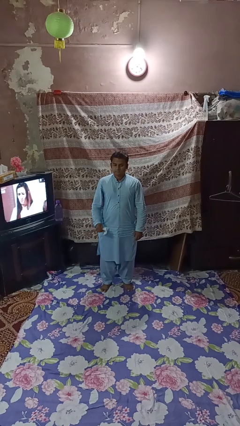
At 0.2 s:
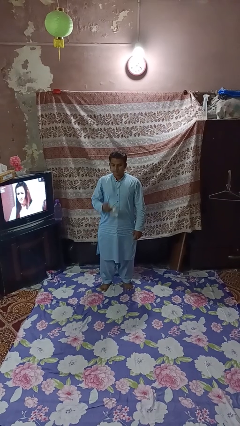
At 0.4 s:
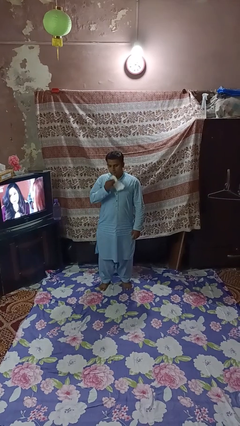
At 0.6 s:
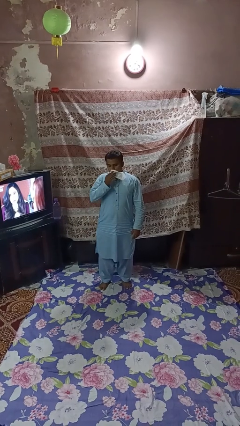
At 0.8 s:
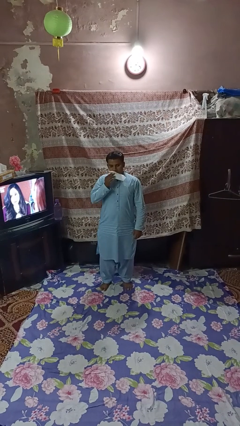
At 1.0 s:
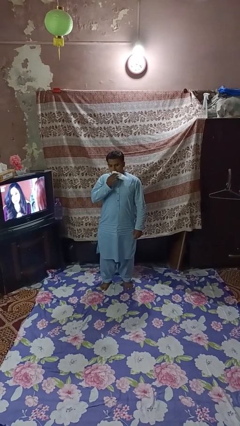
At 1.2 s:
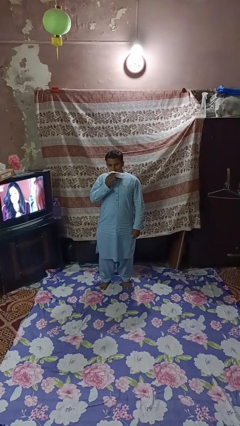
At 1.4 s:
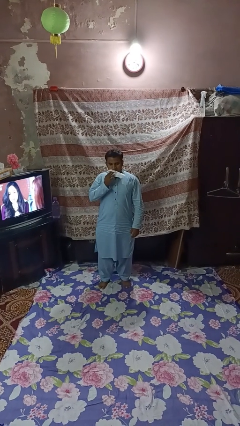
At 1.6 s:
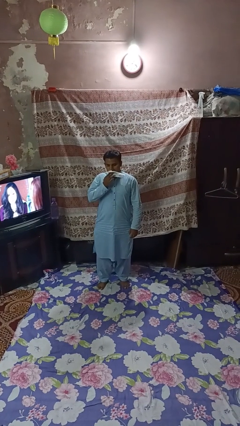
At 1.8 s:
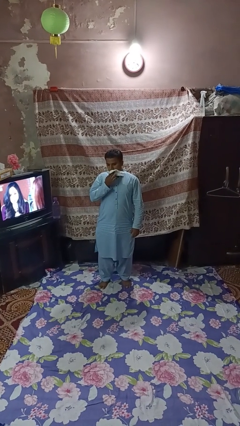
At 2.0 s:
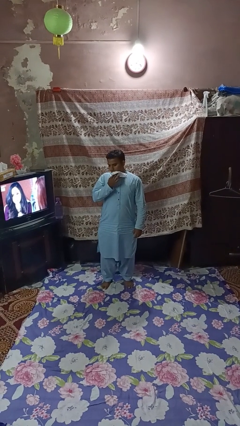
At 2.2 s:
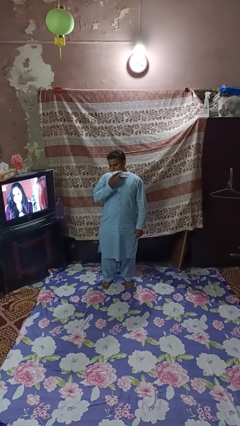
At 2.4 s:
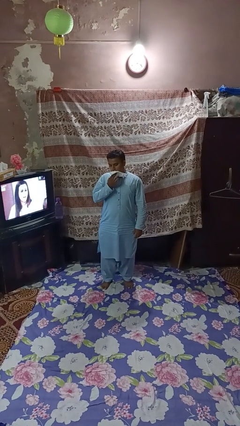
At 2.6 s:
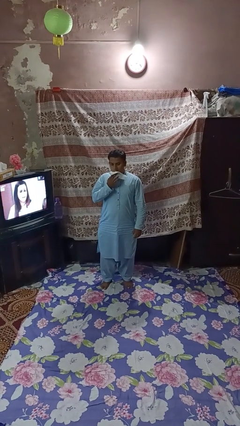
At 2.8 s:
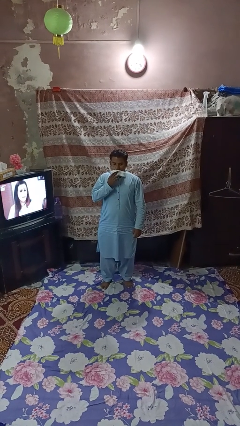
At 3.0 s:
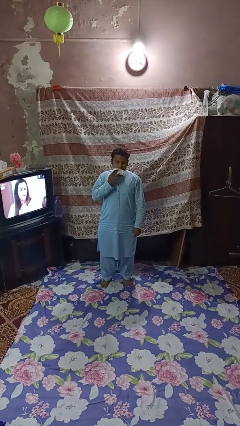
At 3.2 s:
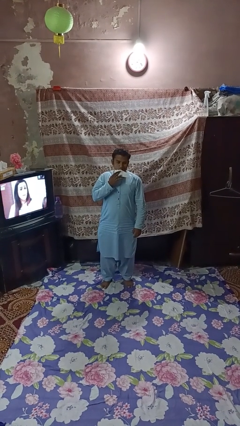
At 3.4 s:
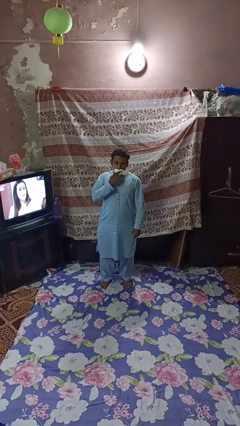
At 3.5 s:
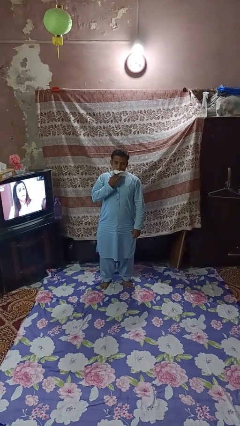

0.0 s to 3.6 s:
person wipes mouth with napkin

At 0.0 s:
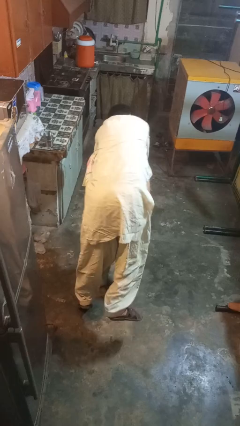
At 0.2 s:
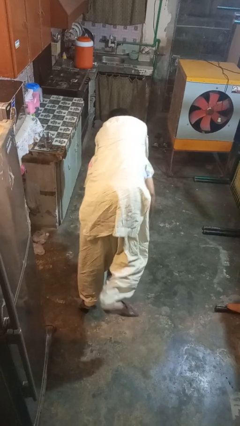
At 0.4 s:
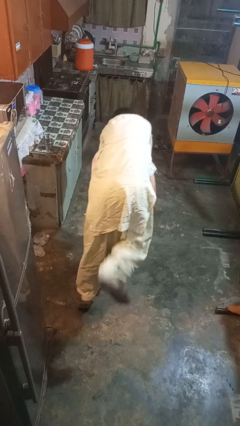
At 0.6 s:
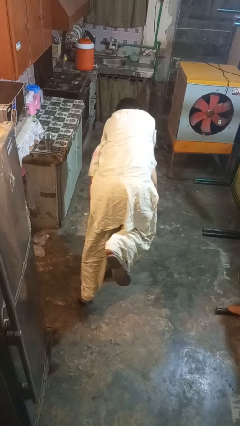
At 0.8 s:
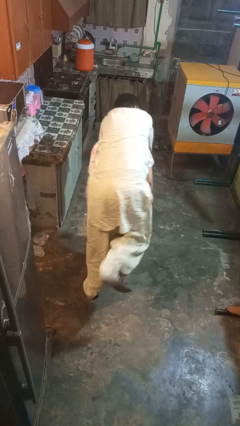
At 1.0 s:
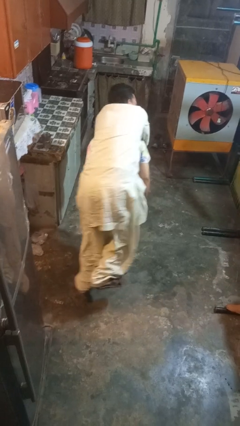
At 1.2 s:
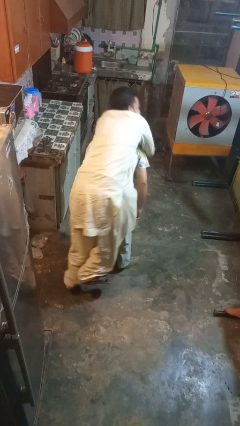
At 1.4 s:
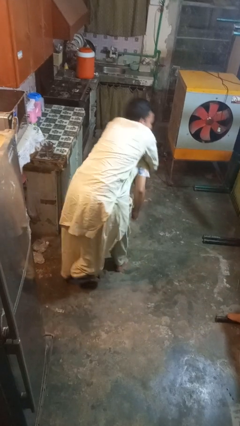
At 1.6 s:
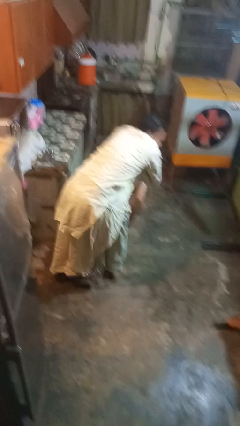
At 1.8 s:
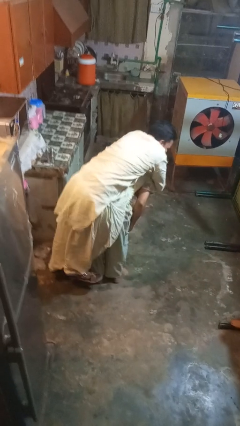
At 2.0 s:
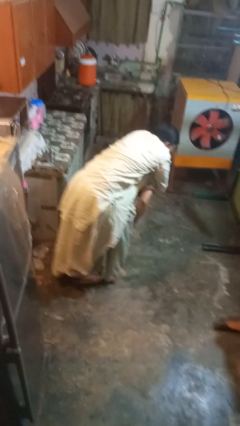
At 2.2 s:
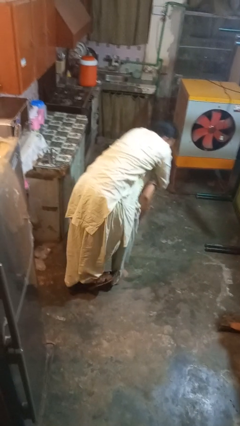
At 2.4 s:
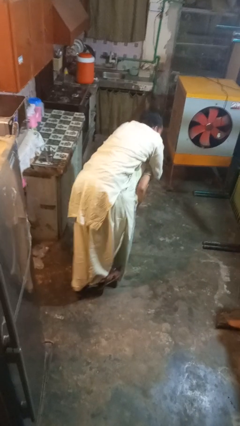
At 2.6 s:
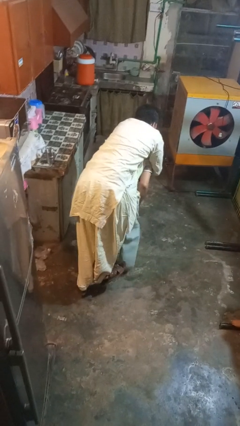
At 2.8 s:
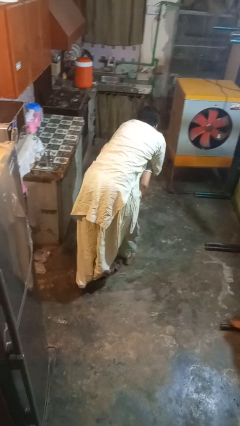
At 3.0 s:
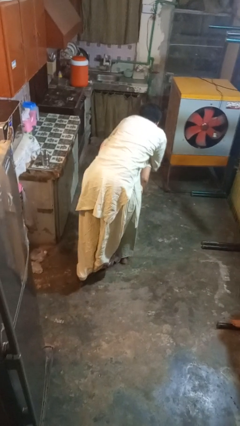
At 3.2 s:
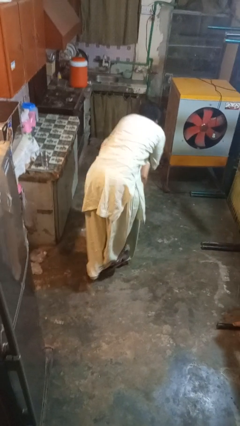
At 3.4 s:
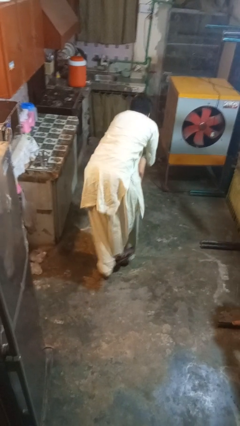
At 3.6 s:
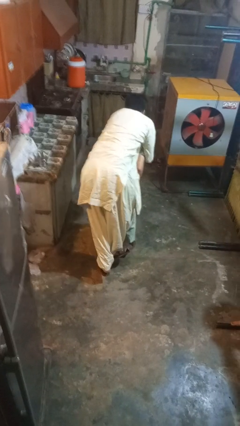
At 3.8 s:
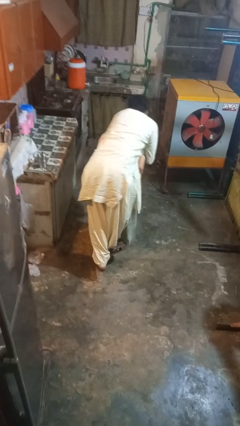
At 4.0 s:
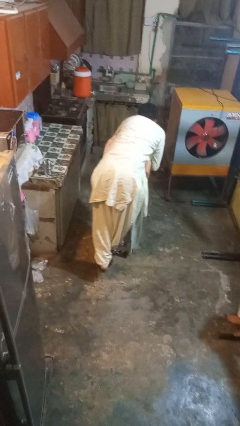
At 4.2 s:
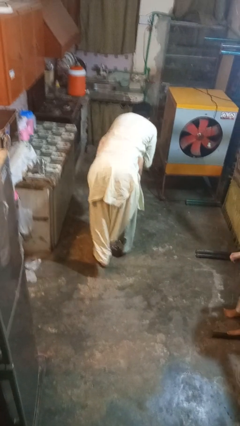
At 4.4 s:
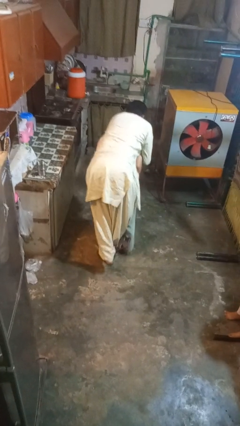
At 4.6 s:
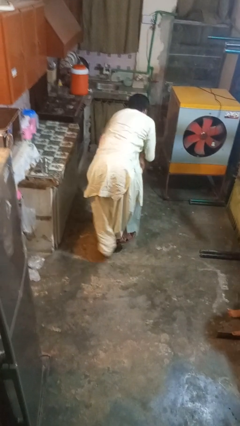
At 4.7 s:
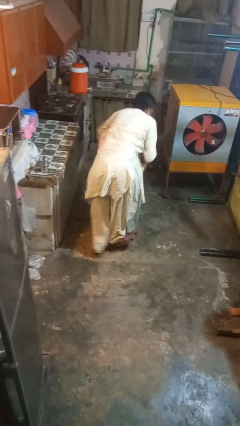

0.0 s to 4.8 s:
person carries person on back

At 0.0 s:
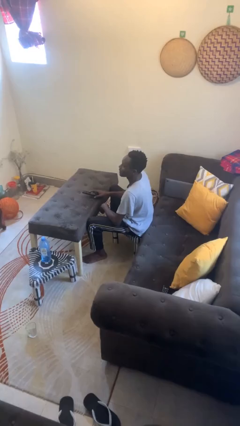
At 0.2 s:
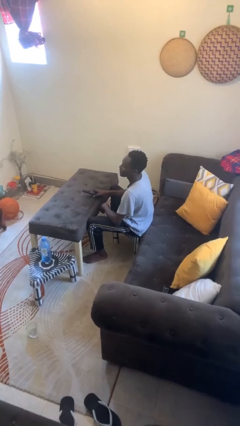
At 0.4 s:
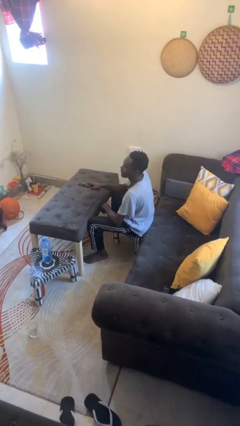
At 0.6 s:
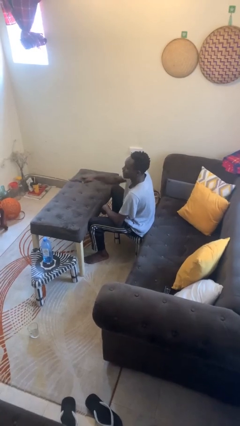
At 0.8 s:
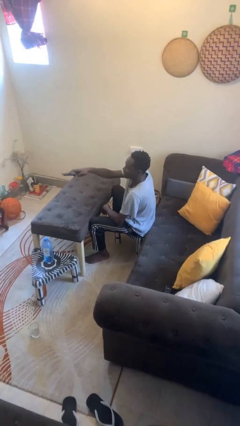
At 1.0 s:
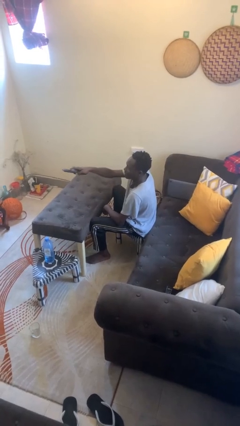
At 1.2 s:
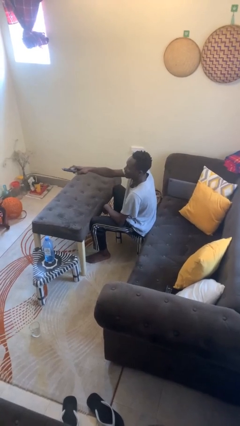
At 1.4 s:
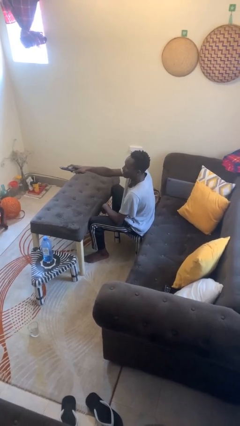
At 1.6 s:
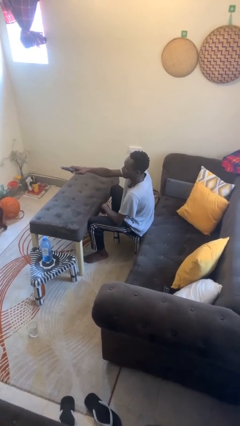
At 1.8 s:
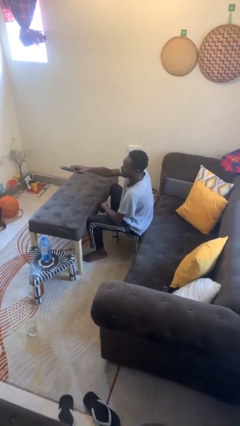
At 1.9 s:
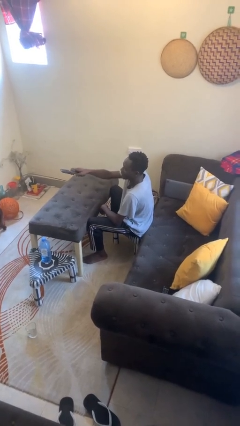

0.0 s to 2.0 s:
person uses television remote

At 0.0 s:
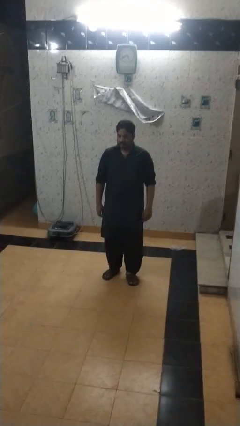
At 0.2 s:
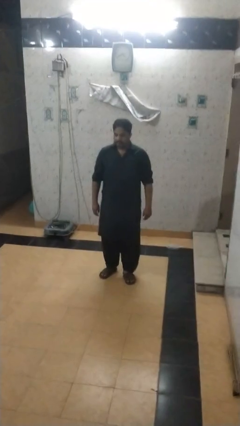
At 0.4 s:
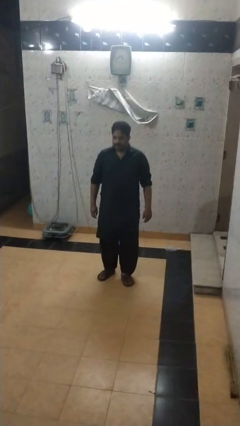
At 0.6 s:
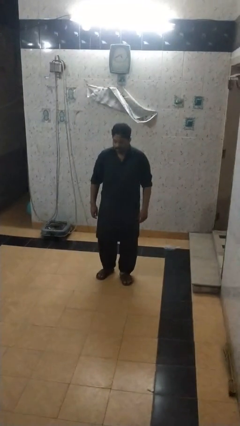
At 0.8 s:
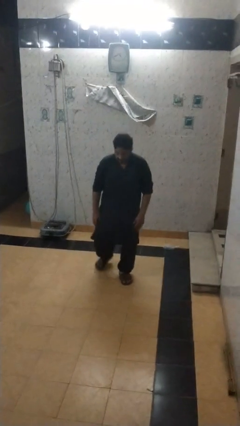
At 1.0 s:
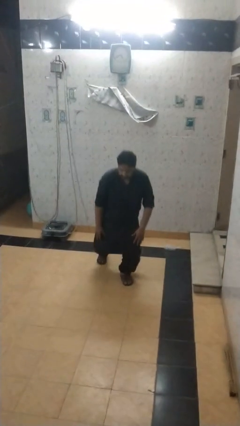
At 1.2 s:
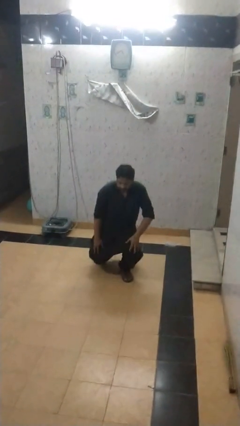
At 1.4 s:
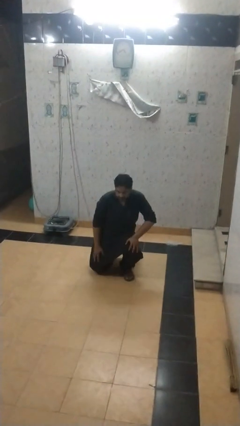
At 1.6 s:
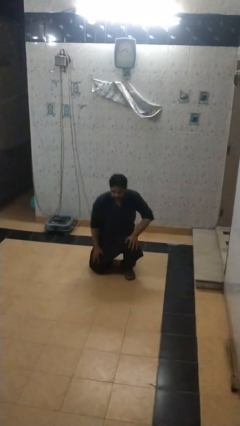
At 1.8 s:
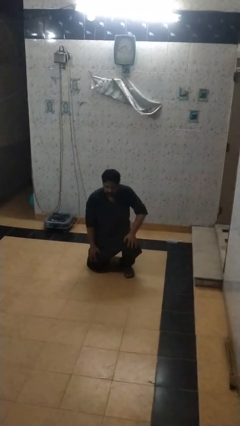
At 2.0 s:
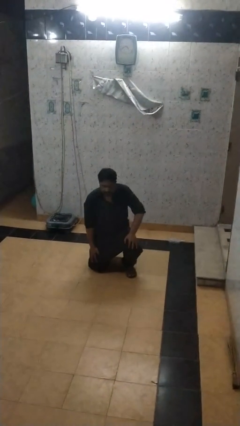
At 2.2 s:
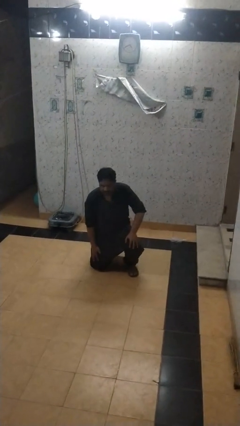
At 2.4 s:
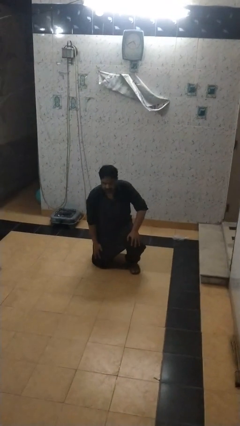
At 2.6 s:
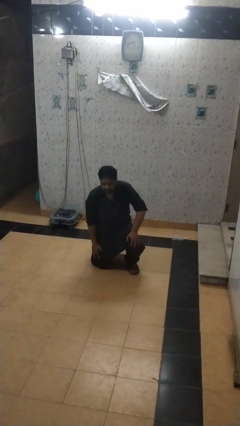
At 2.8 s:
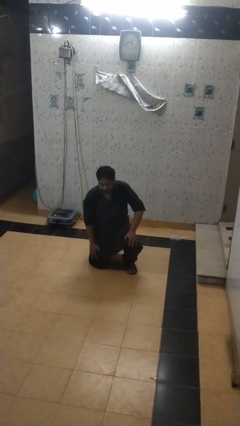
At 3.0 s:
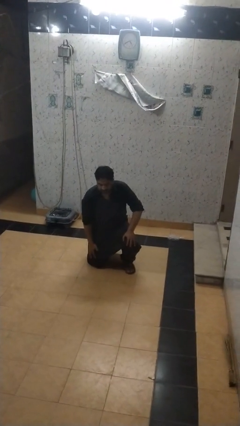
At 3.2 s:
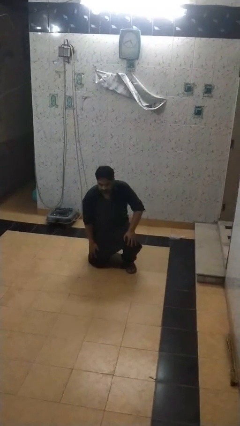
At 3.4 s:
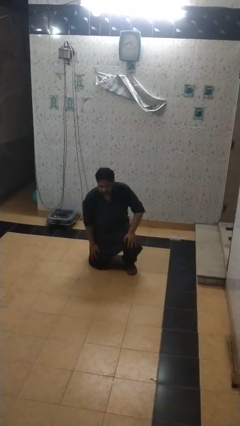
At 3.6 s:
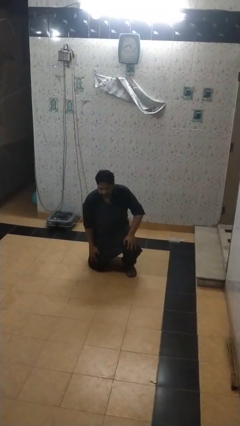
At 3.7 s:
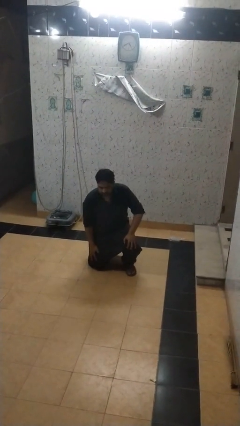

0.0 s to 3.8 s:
person kneels

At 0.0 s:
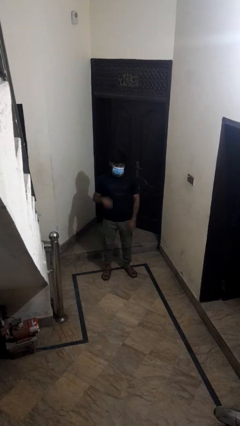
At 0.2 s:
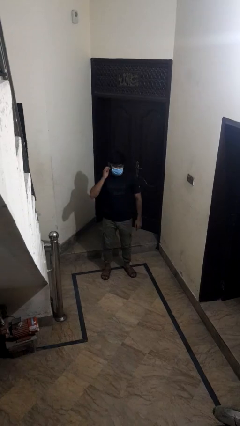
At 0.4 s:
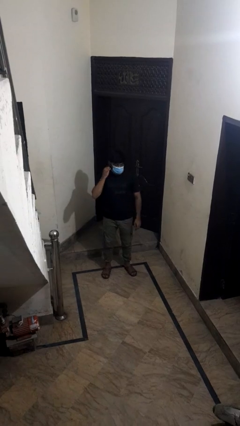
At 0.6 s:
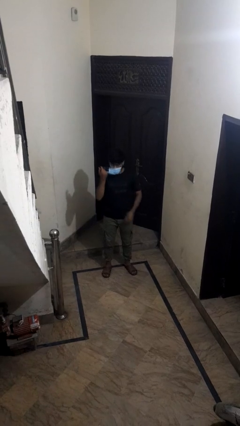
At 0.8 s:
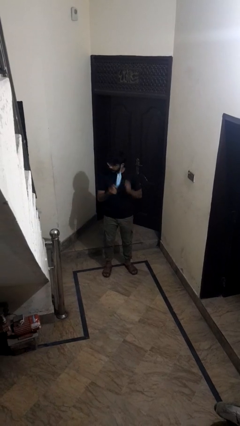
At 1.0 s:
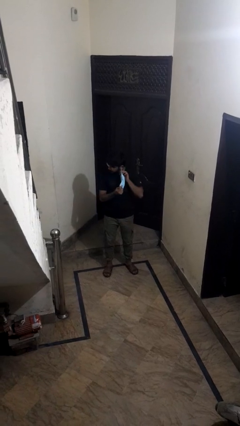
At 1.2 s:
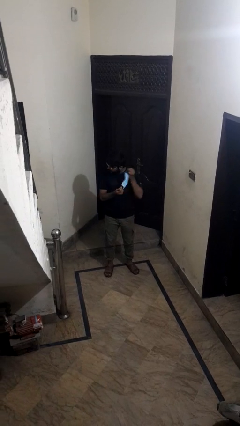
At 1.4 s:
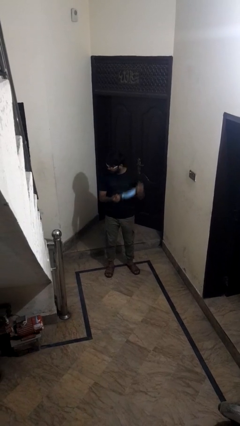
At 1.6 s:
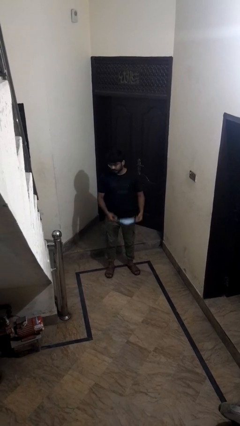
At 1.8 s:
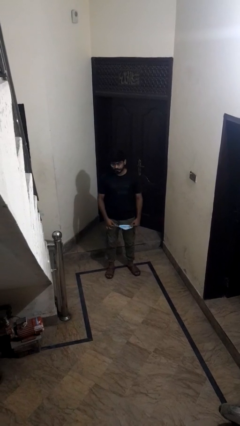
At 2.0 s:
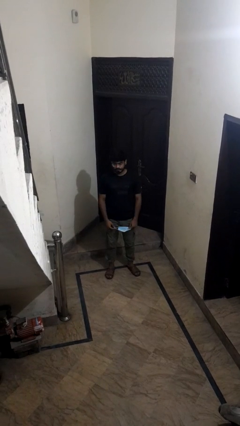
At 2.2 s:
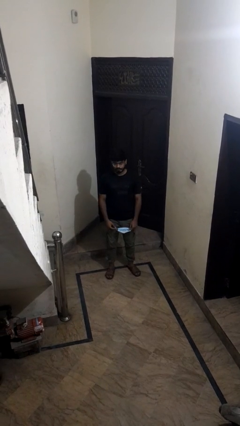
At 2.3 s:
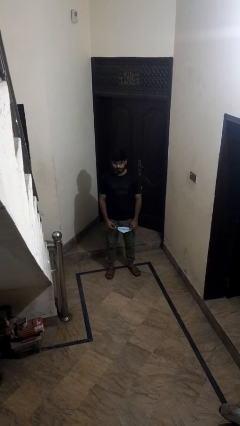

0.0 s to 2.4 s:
person takes off facemask

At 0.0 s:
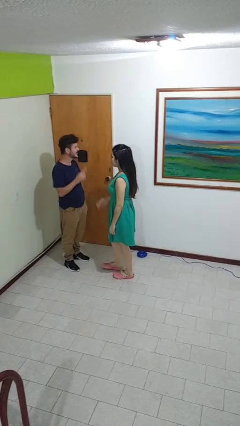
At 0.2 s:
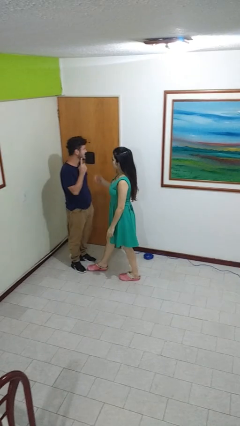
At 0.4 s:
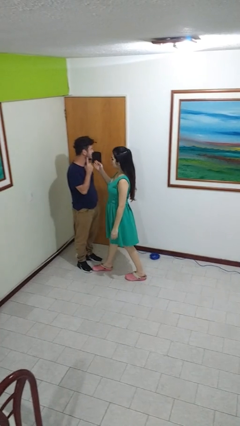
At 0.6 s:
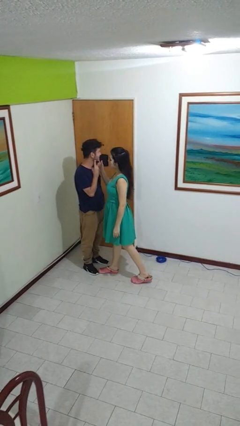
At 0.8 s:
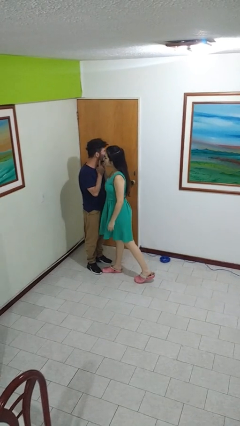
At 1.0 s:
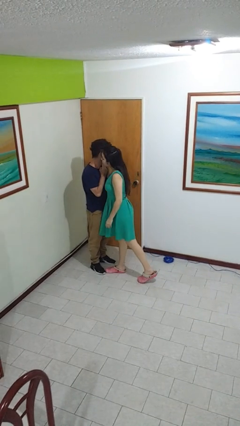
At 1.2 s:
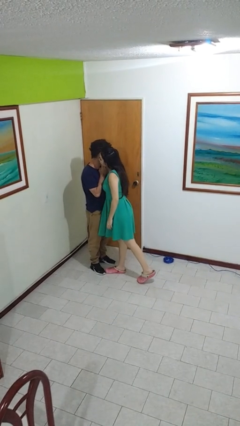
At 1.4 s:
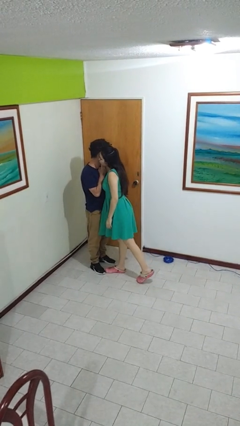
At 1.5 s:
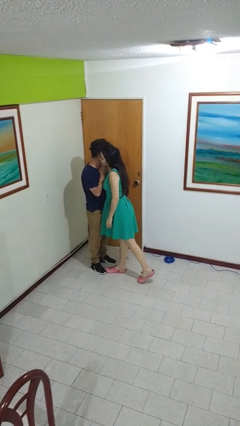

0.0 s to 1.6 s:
person kisses cheek of person
